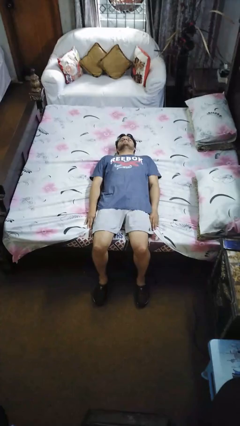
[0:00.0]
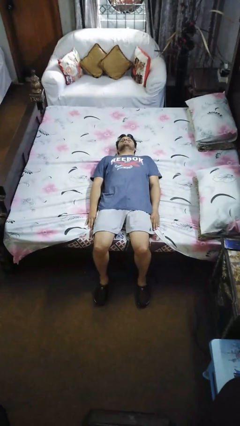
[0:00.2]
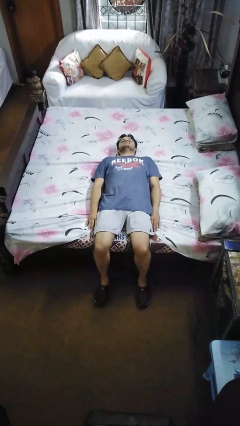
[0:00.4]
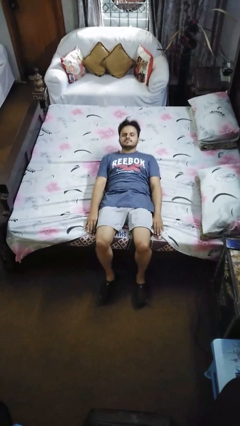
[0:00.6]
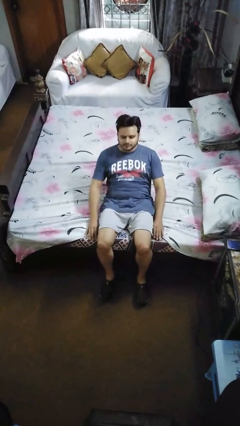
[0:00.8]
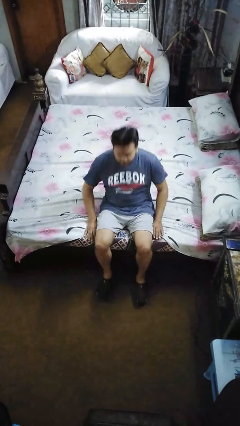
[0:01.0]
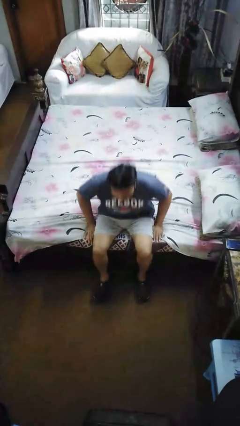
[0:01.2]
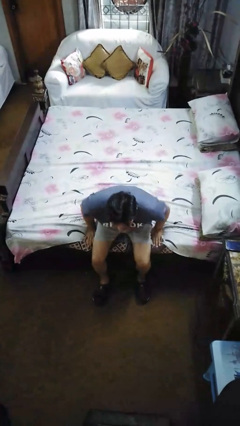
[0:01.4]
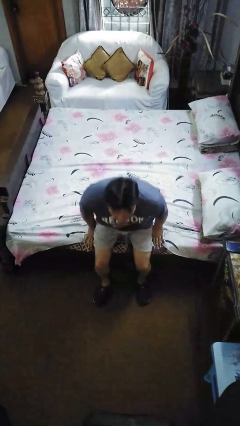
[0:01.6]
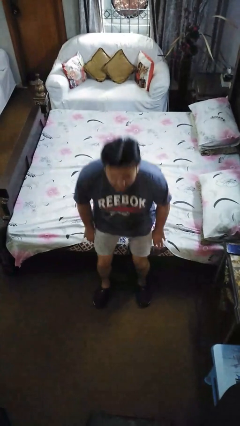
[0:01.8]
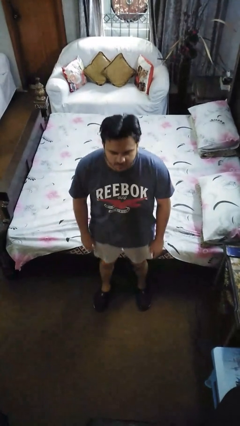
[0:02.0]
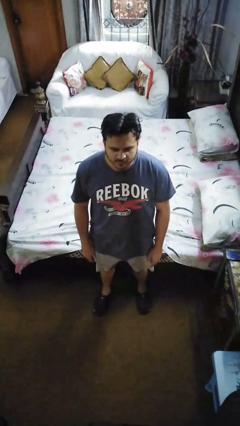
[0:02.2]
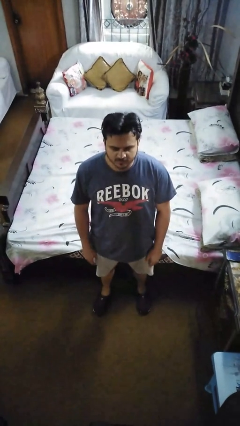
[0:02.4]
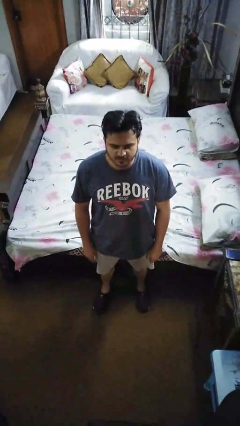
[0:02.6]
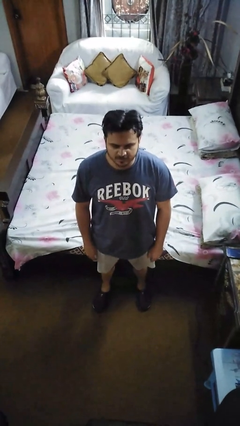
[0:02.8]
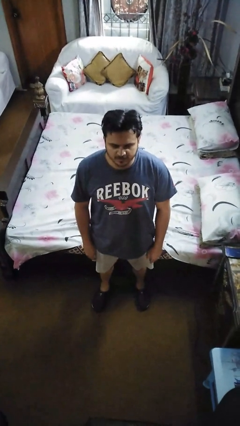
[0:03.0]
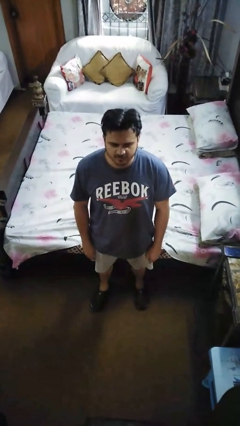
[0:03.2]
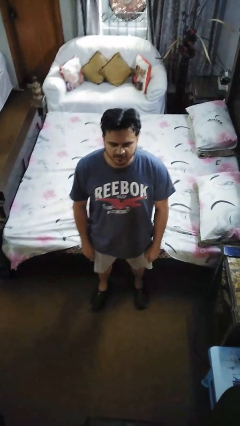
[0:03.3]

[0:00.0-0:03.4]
person stands up

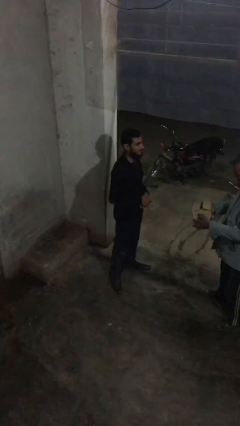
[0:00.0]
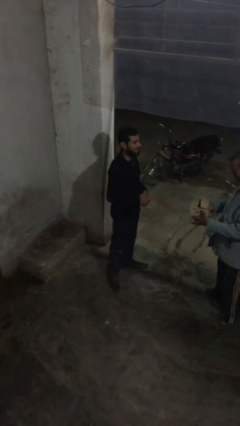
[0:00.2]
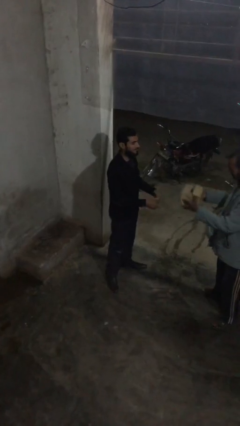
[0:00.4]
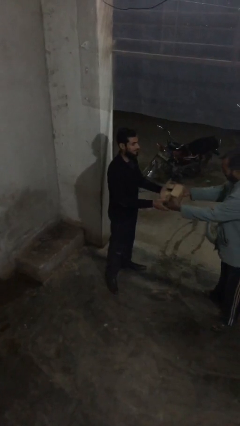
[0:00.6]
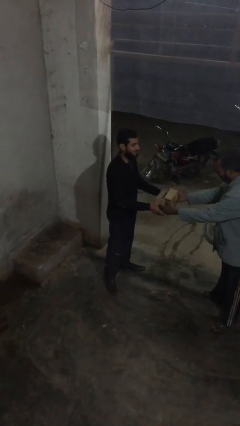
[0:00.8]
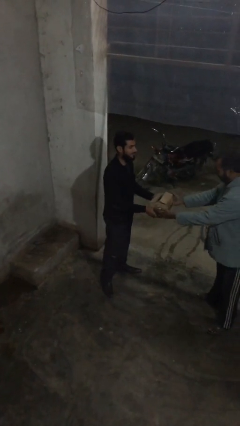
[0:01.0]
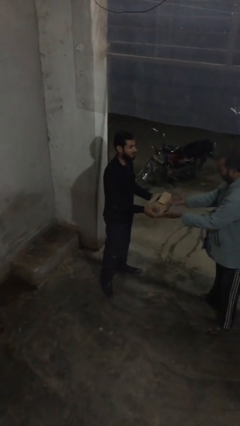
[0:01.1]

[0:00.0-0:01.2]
person transfers object to person

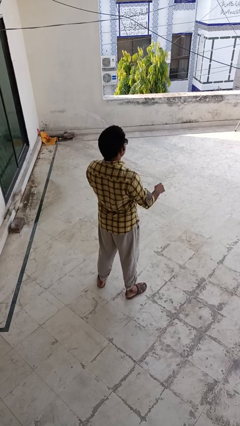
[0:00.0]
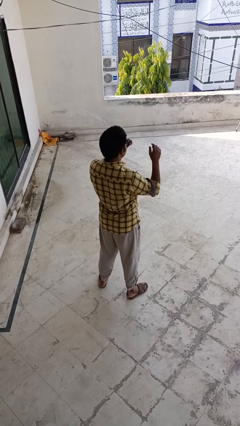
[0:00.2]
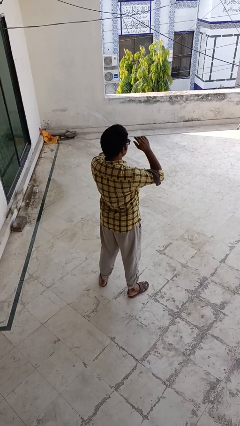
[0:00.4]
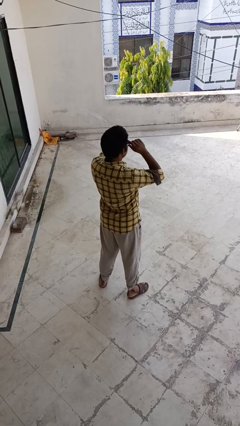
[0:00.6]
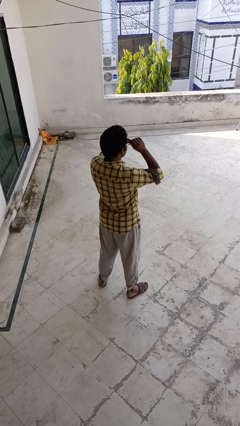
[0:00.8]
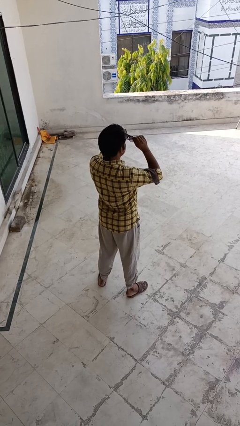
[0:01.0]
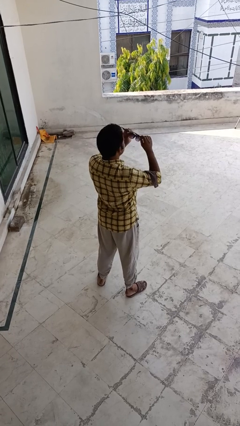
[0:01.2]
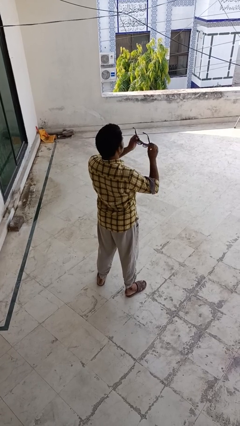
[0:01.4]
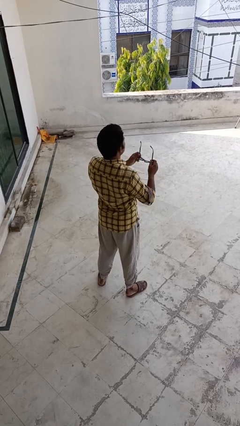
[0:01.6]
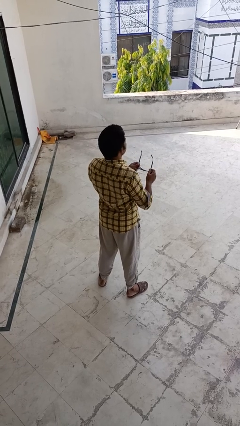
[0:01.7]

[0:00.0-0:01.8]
person takes off sunglasses

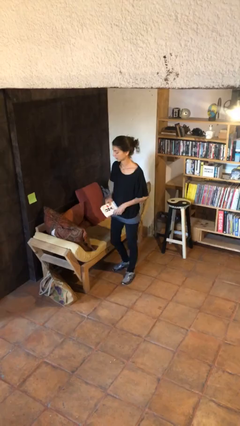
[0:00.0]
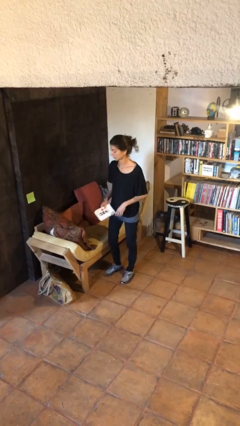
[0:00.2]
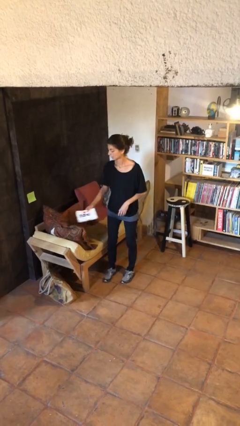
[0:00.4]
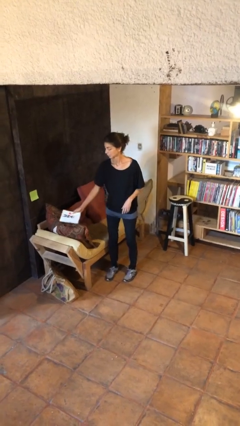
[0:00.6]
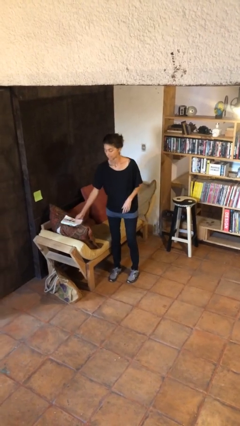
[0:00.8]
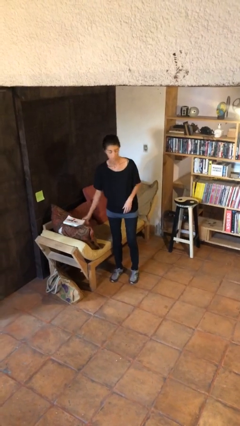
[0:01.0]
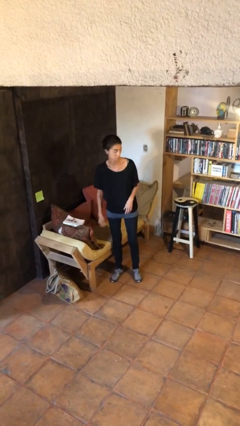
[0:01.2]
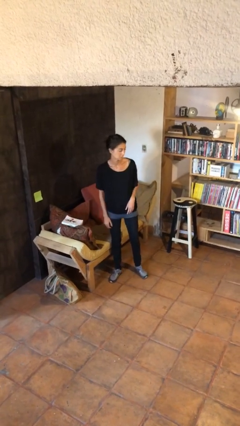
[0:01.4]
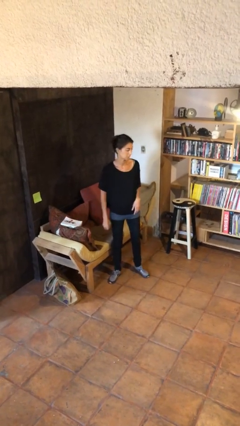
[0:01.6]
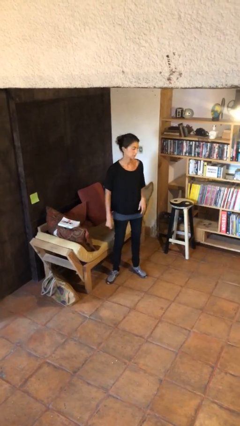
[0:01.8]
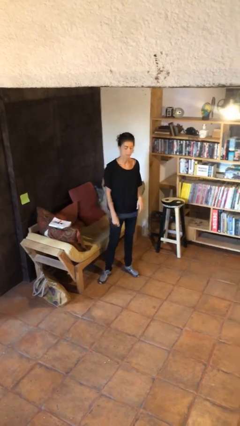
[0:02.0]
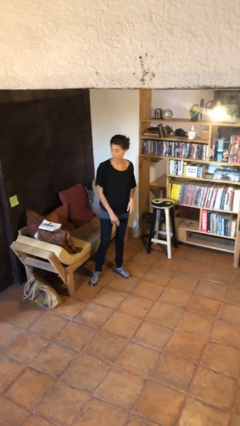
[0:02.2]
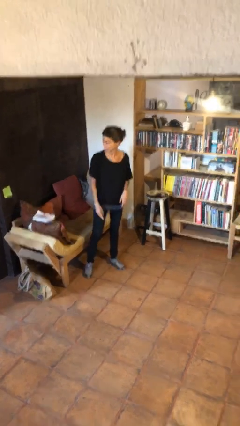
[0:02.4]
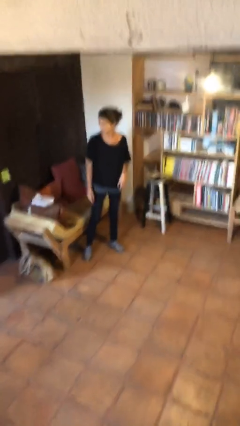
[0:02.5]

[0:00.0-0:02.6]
person puts down object on couch

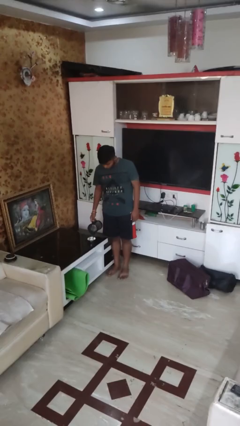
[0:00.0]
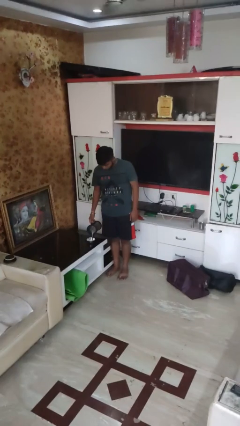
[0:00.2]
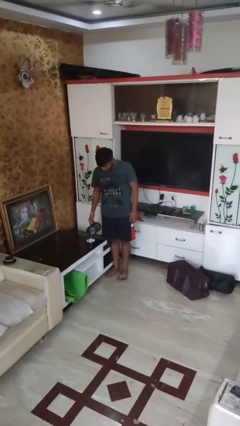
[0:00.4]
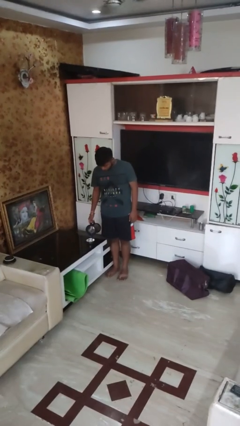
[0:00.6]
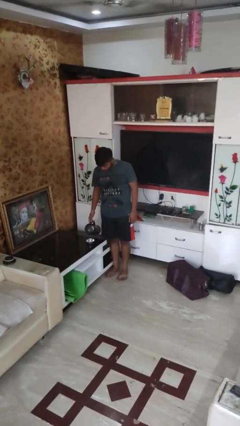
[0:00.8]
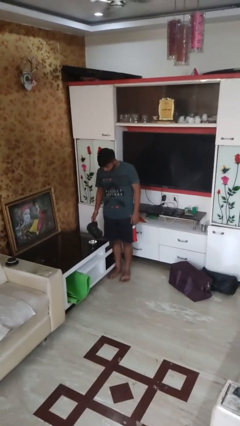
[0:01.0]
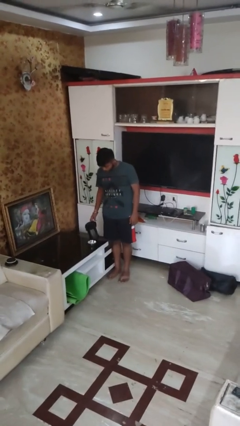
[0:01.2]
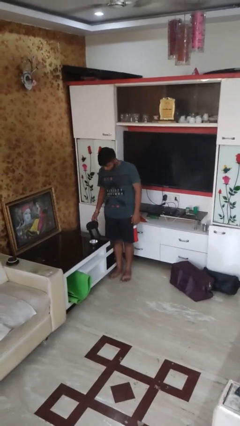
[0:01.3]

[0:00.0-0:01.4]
person pours into bowl

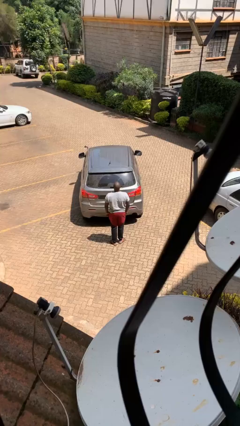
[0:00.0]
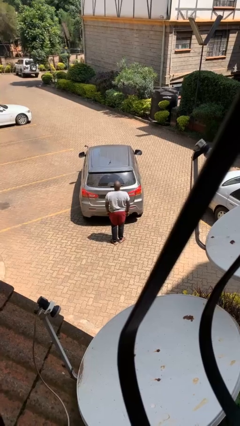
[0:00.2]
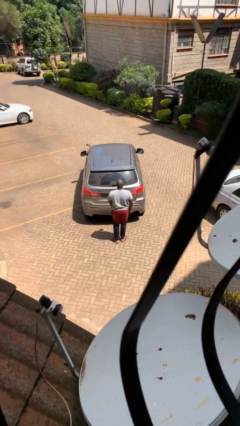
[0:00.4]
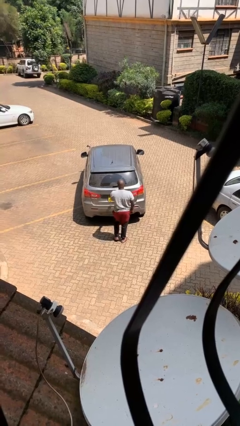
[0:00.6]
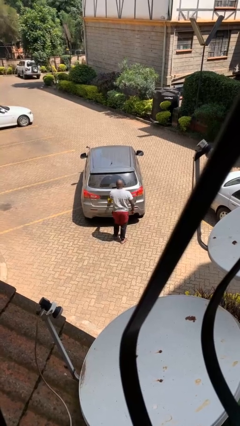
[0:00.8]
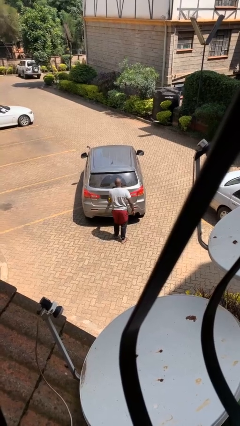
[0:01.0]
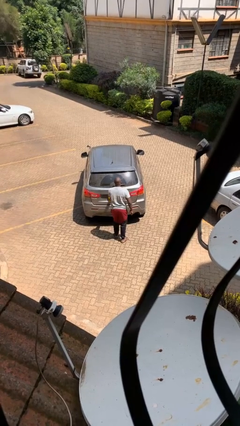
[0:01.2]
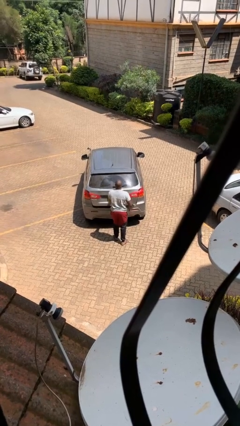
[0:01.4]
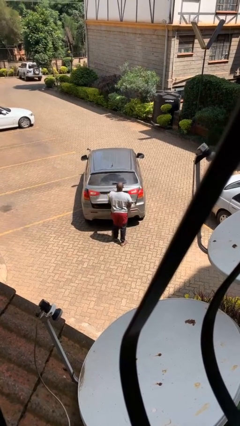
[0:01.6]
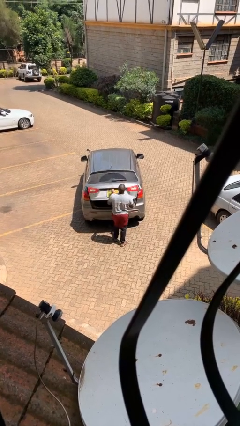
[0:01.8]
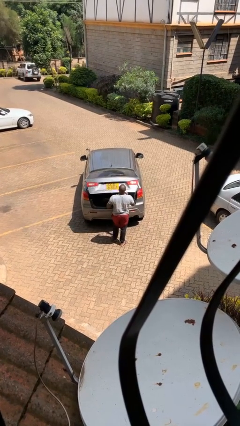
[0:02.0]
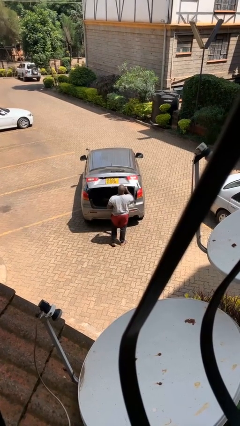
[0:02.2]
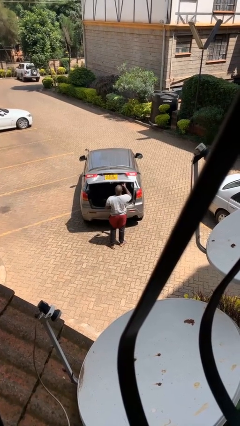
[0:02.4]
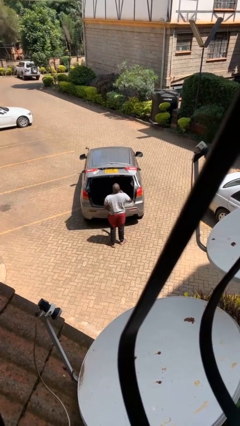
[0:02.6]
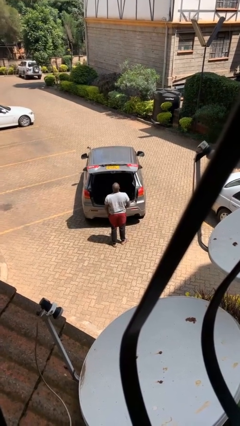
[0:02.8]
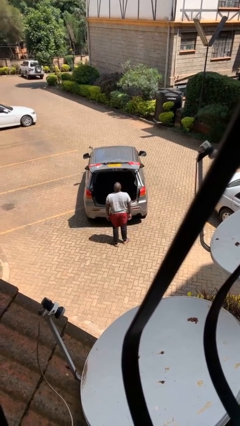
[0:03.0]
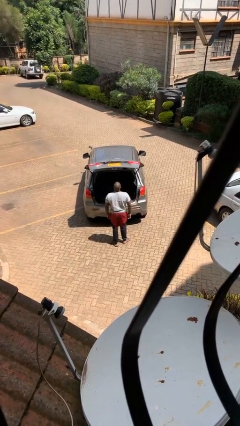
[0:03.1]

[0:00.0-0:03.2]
person opens car trunk

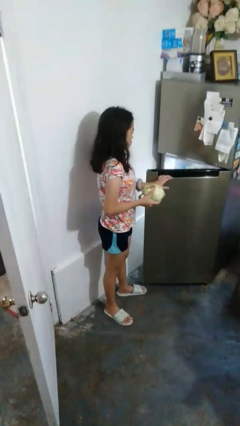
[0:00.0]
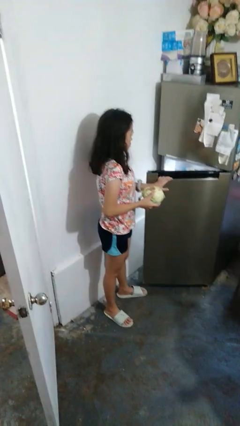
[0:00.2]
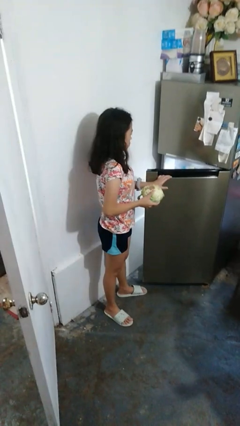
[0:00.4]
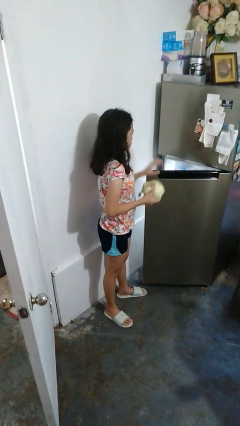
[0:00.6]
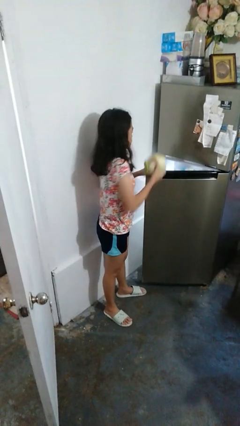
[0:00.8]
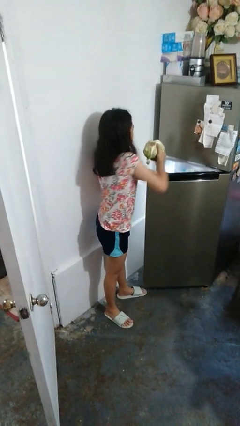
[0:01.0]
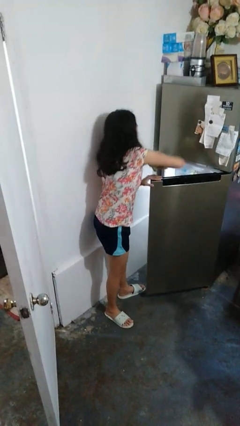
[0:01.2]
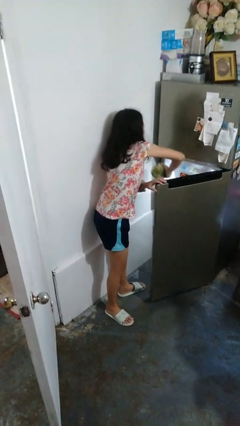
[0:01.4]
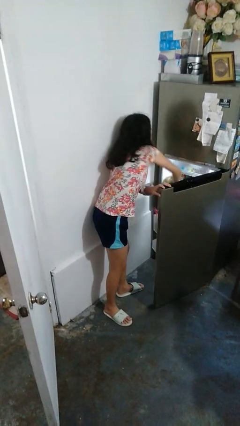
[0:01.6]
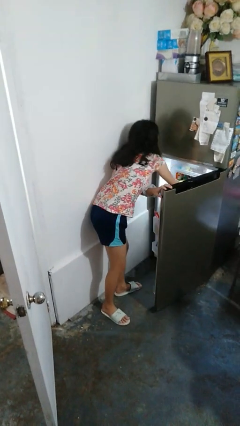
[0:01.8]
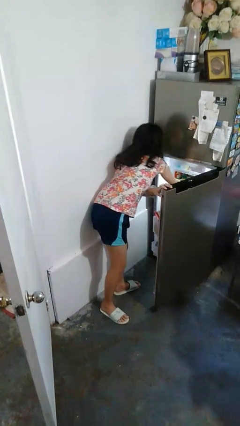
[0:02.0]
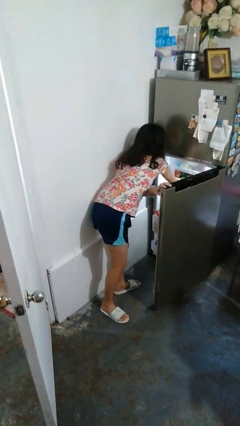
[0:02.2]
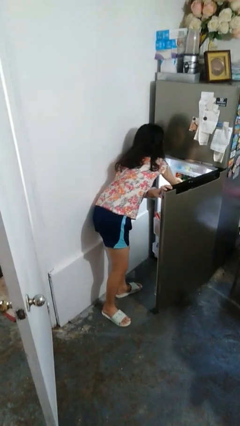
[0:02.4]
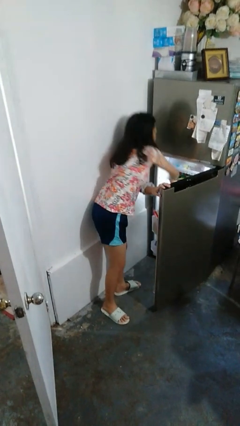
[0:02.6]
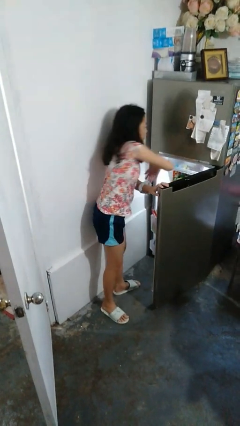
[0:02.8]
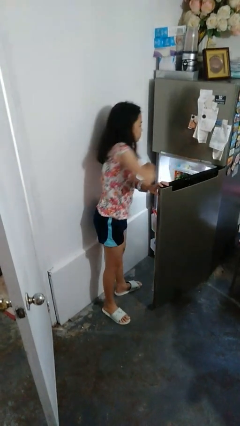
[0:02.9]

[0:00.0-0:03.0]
person puts object into refrigerator

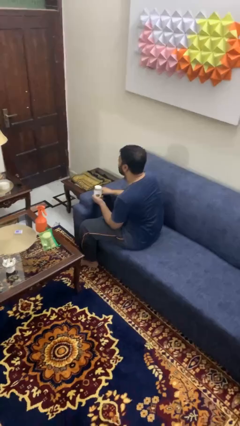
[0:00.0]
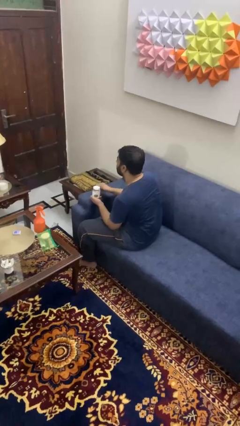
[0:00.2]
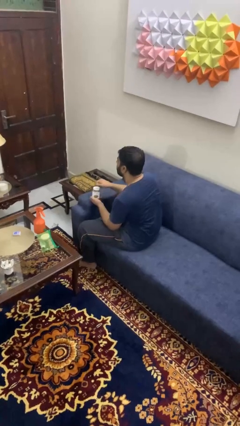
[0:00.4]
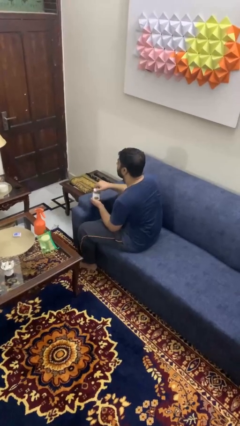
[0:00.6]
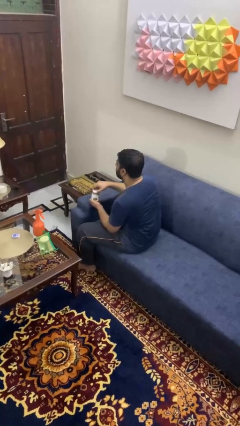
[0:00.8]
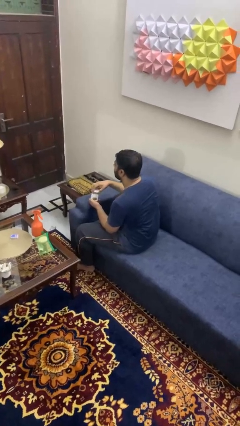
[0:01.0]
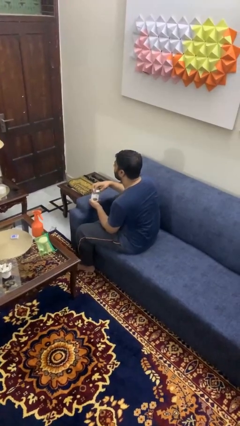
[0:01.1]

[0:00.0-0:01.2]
person opens jar
